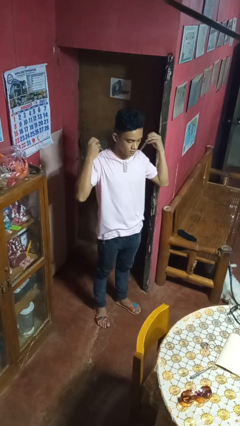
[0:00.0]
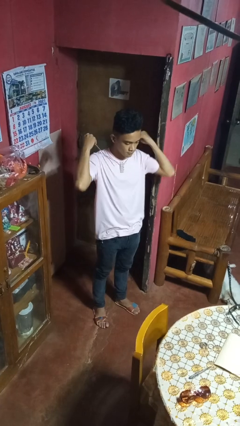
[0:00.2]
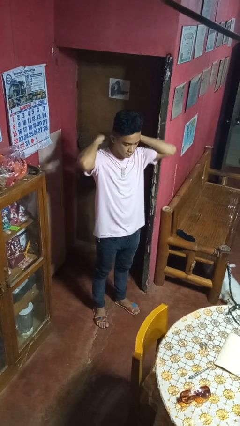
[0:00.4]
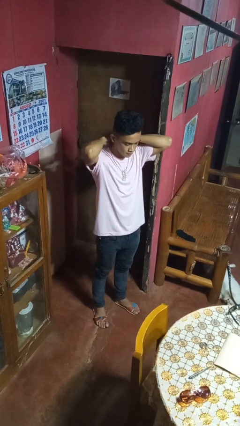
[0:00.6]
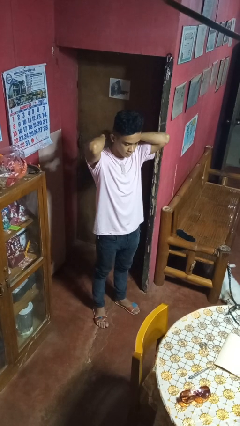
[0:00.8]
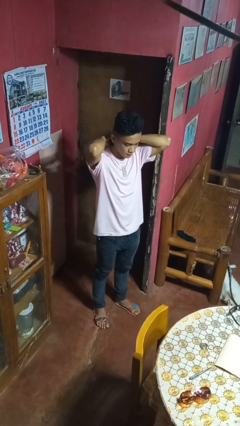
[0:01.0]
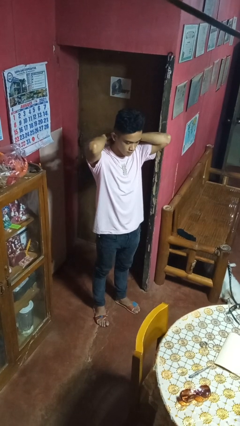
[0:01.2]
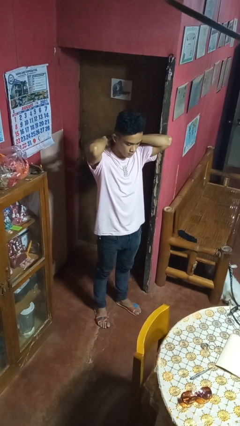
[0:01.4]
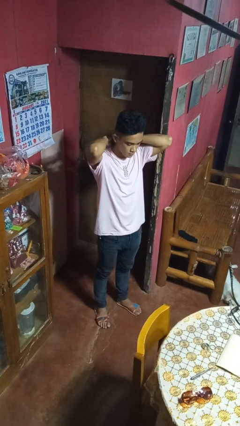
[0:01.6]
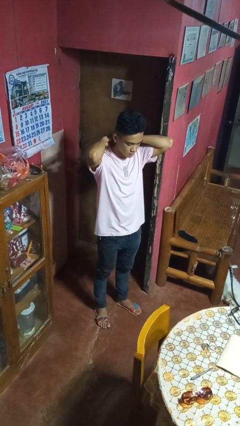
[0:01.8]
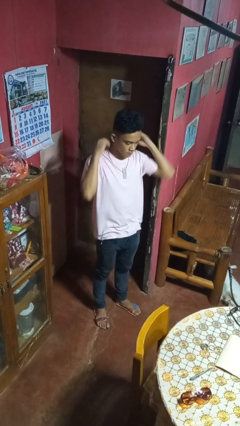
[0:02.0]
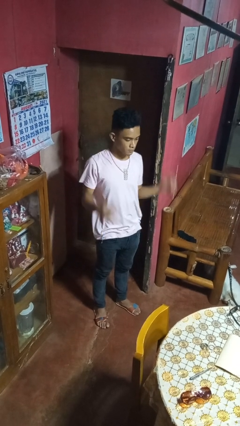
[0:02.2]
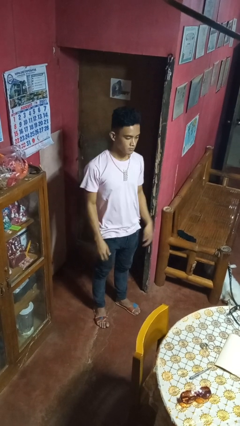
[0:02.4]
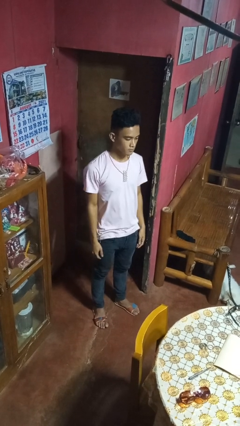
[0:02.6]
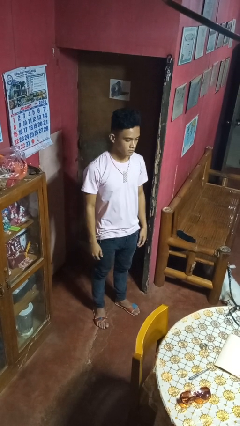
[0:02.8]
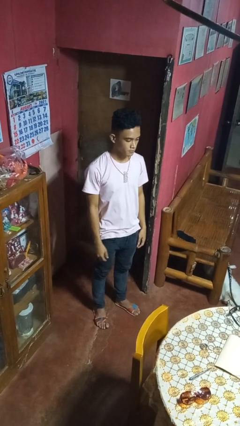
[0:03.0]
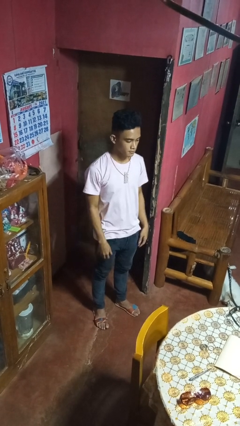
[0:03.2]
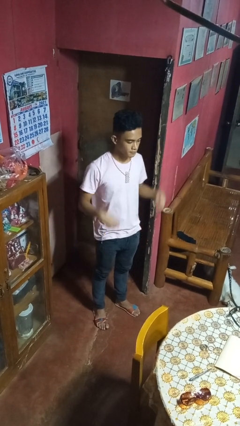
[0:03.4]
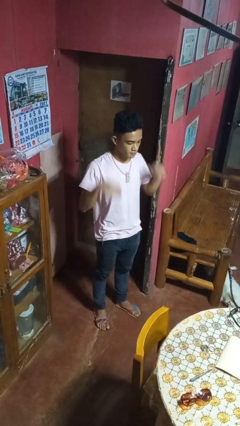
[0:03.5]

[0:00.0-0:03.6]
person puts on necklace

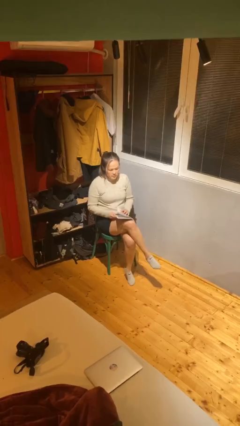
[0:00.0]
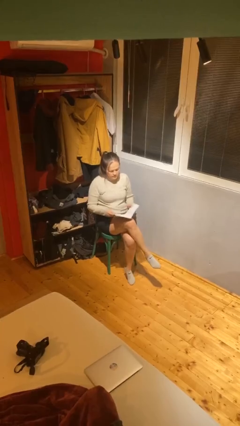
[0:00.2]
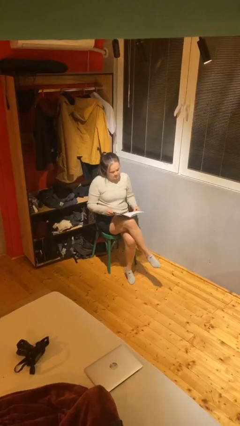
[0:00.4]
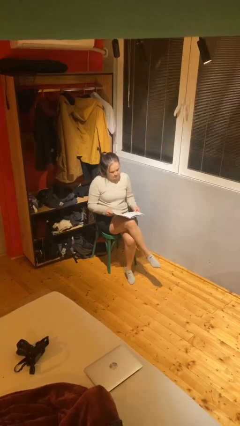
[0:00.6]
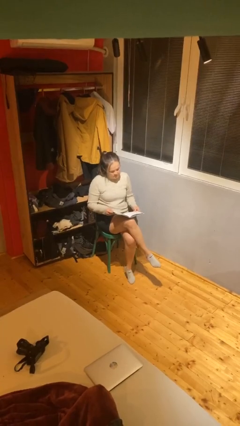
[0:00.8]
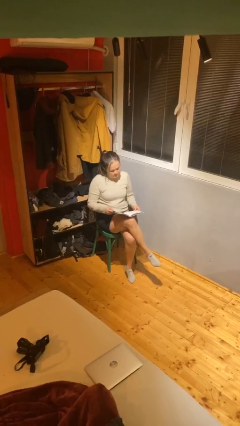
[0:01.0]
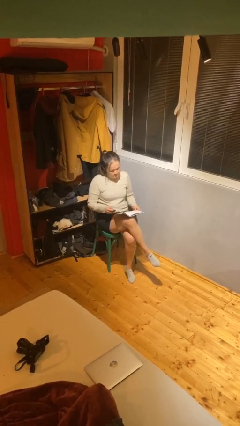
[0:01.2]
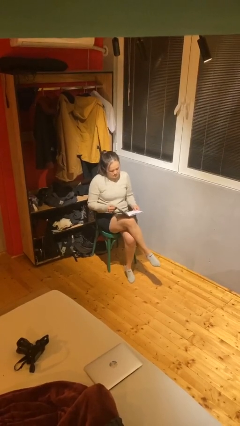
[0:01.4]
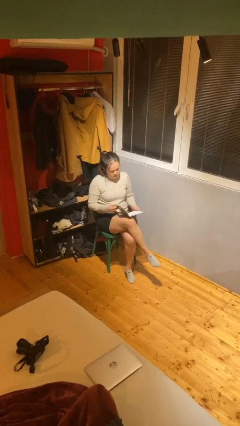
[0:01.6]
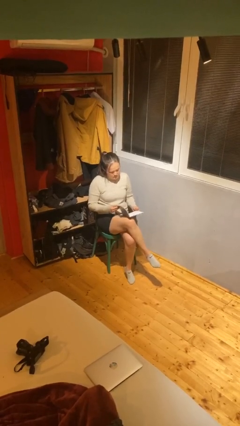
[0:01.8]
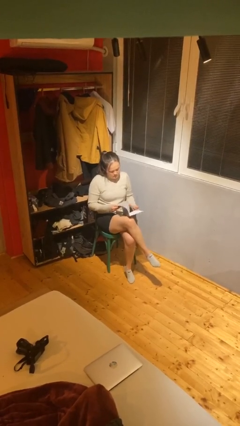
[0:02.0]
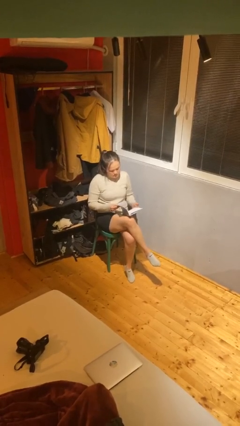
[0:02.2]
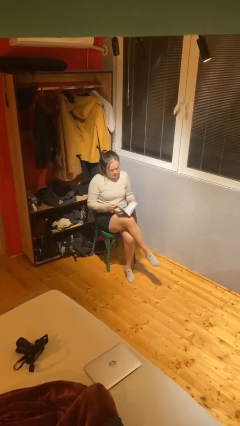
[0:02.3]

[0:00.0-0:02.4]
person reads document

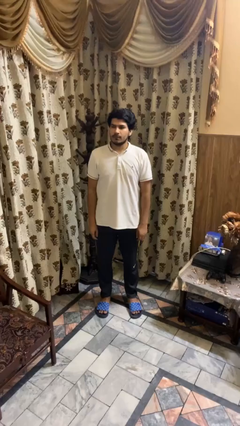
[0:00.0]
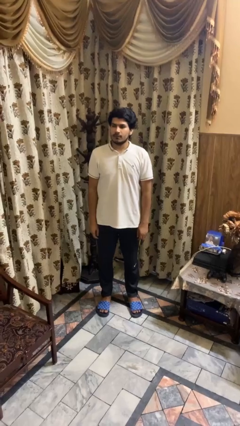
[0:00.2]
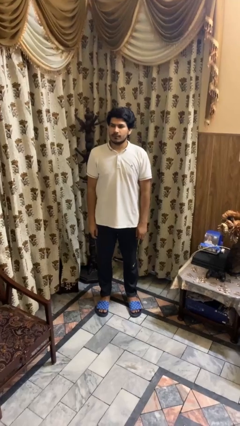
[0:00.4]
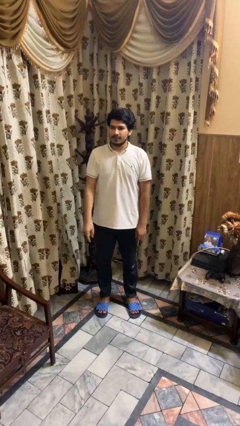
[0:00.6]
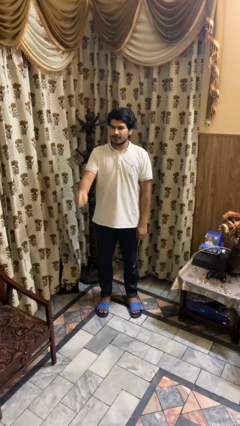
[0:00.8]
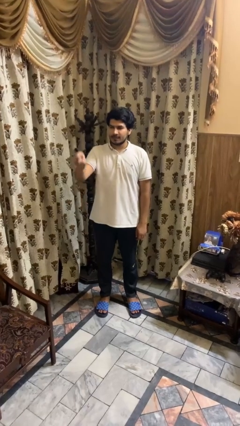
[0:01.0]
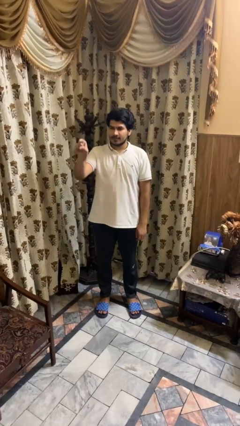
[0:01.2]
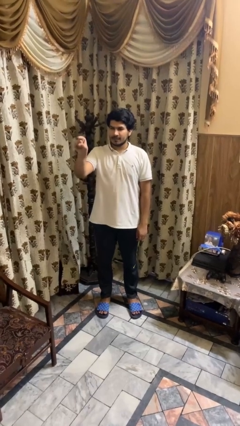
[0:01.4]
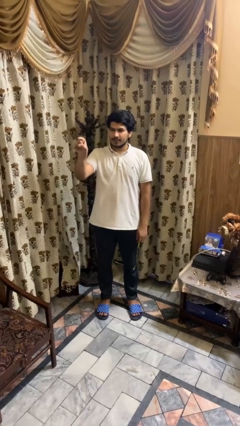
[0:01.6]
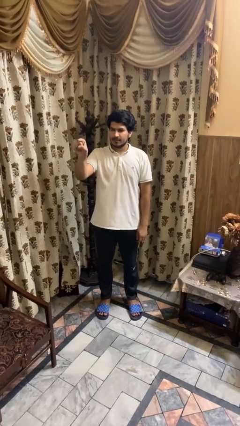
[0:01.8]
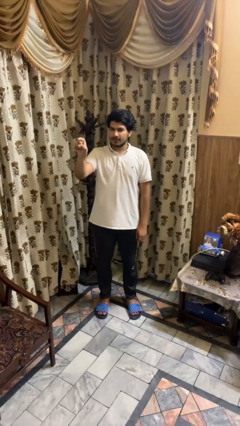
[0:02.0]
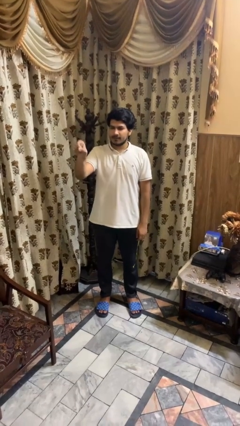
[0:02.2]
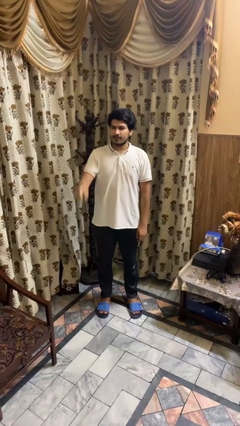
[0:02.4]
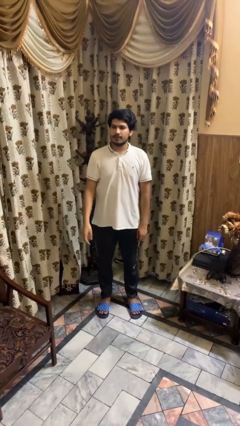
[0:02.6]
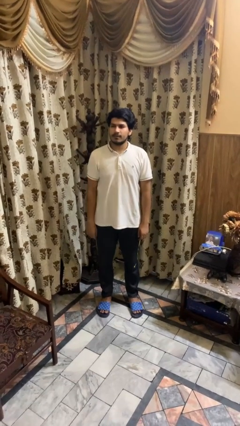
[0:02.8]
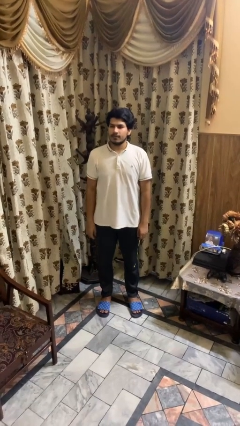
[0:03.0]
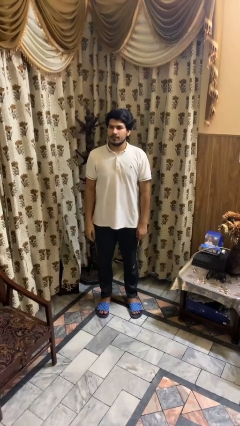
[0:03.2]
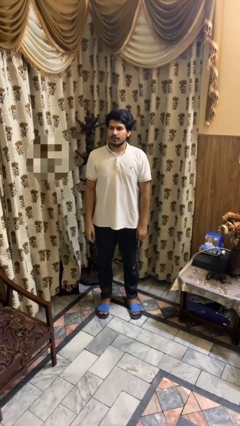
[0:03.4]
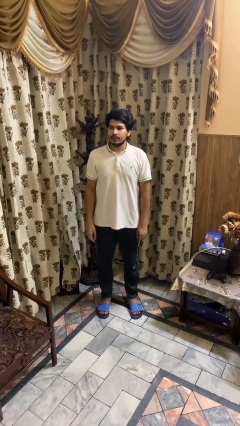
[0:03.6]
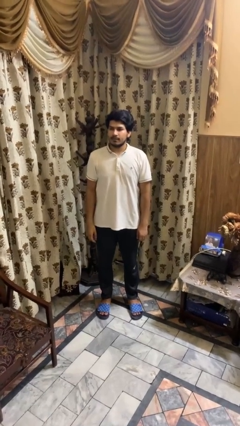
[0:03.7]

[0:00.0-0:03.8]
person points at person

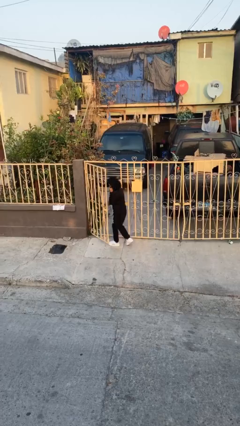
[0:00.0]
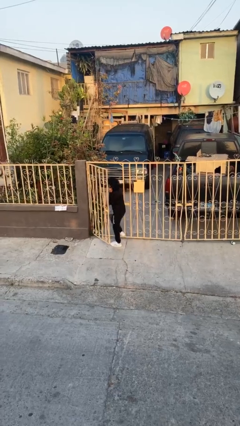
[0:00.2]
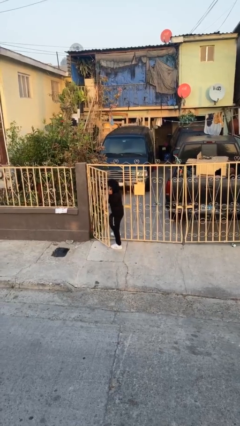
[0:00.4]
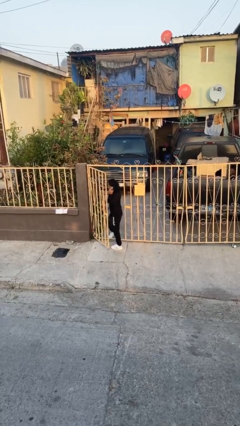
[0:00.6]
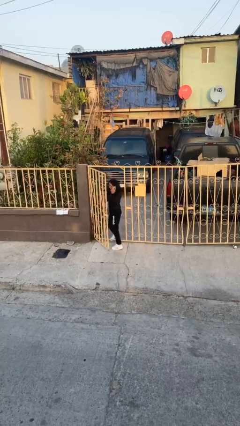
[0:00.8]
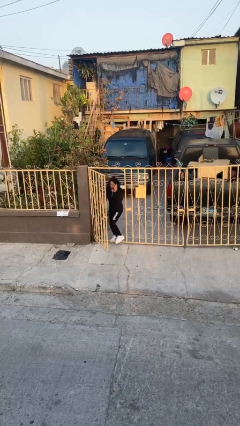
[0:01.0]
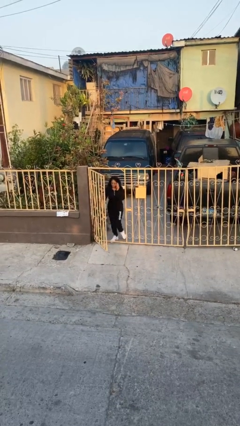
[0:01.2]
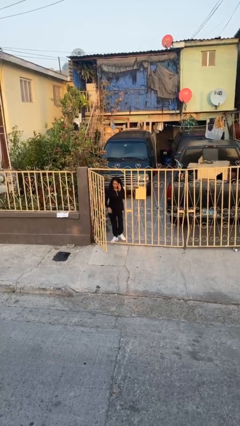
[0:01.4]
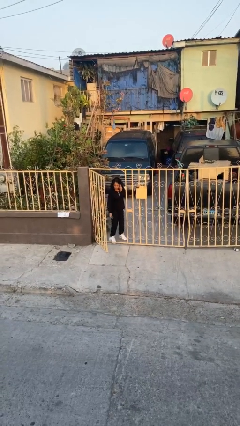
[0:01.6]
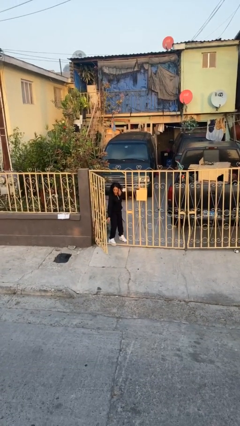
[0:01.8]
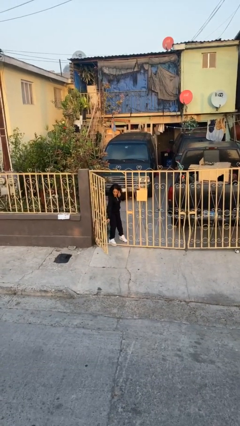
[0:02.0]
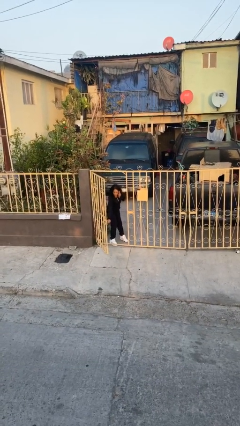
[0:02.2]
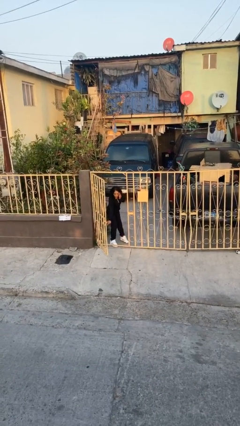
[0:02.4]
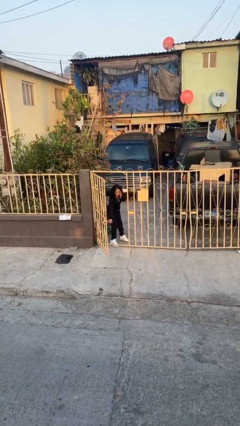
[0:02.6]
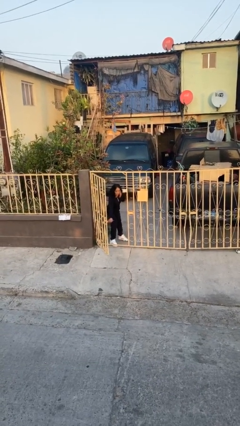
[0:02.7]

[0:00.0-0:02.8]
person exits scene through structure

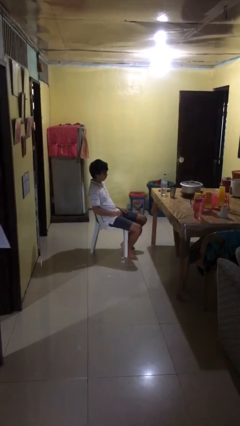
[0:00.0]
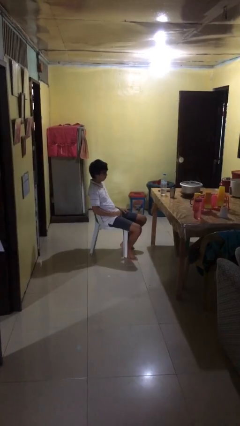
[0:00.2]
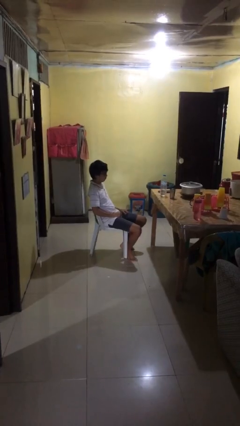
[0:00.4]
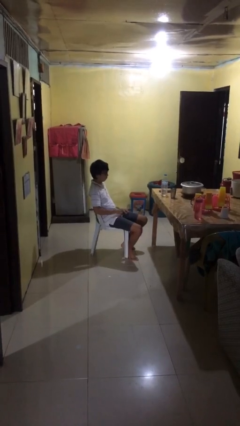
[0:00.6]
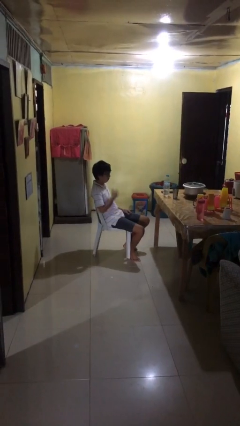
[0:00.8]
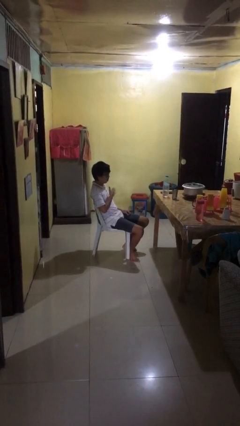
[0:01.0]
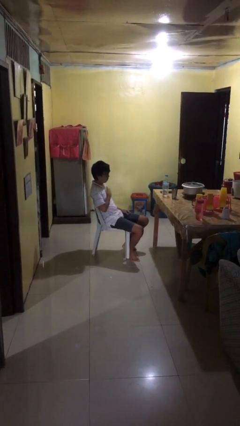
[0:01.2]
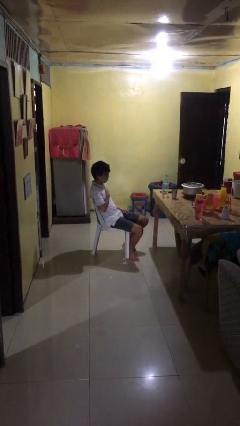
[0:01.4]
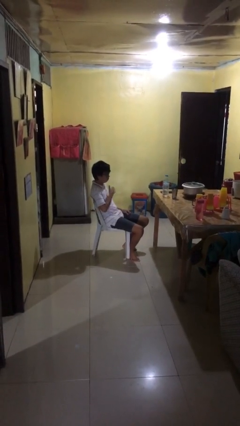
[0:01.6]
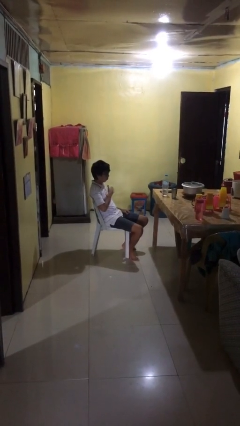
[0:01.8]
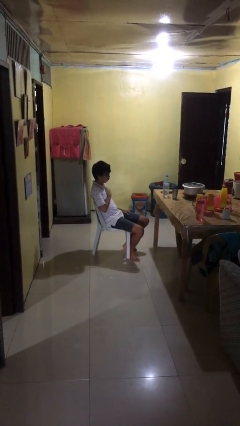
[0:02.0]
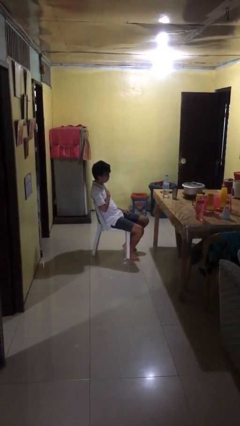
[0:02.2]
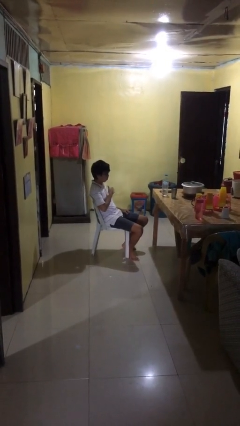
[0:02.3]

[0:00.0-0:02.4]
person drums on chest

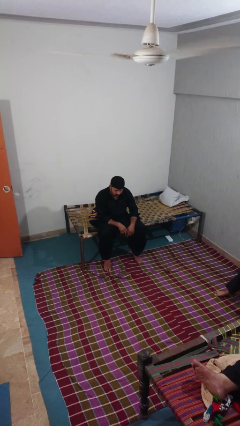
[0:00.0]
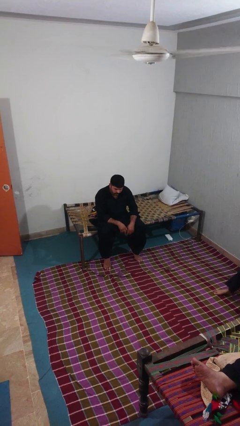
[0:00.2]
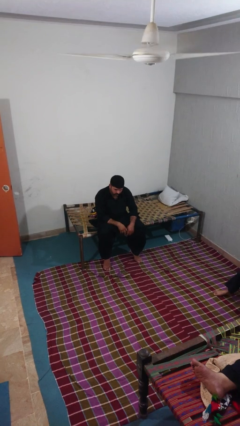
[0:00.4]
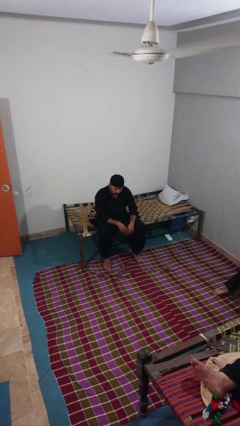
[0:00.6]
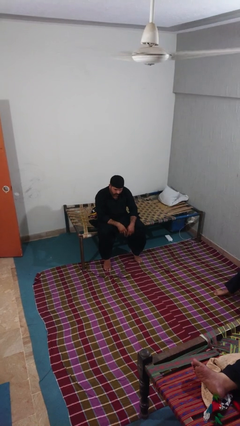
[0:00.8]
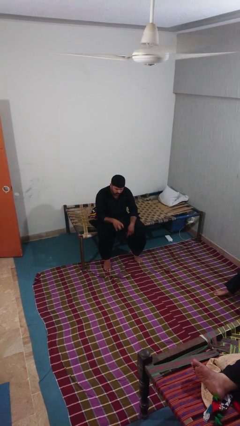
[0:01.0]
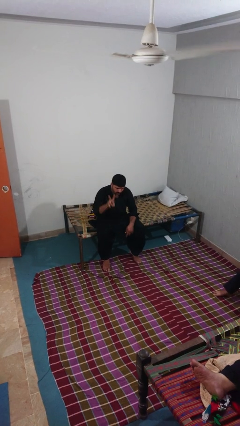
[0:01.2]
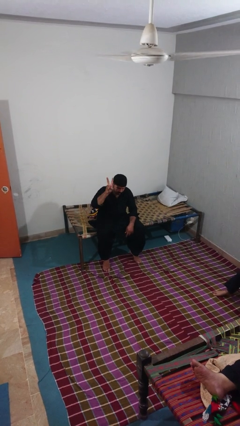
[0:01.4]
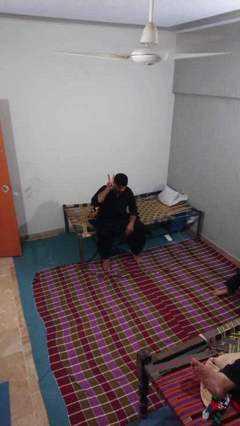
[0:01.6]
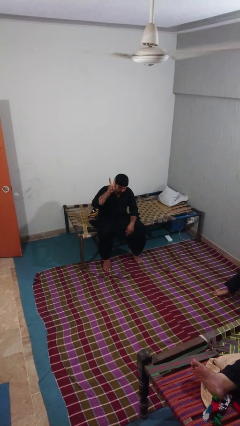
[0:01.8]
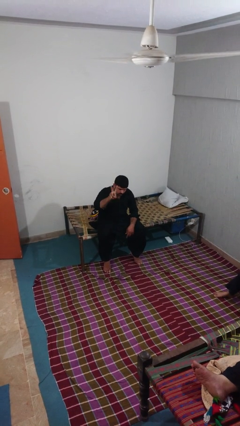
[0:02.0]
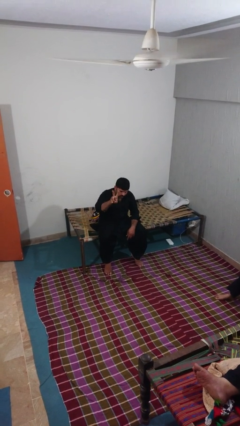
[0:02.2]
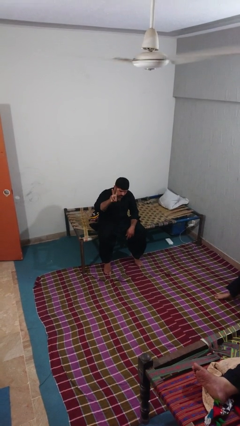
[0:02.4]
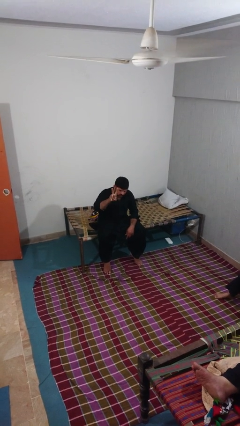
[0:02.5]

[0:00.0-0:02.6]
person gestures peace
